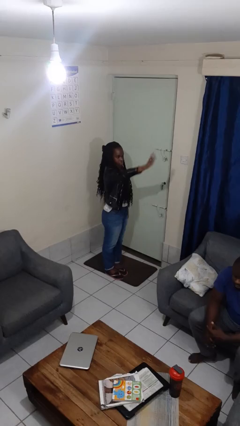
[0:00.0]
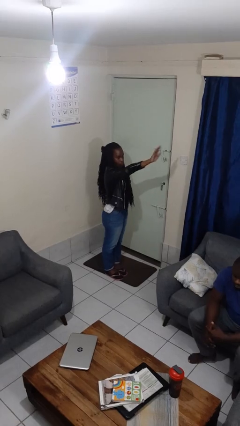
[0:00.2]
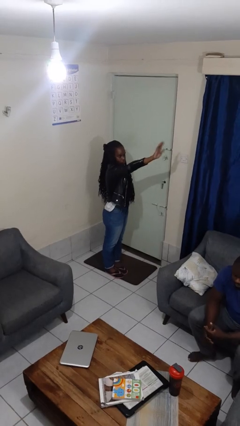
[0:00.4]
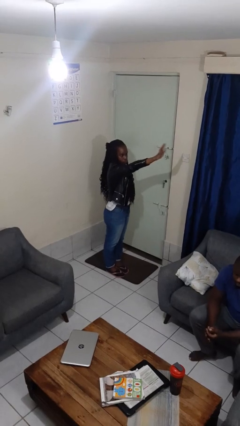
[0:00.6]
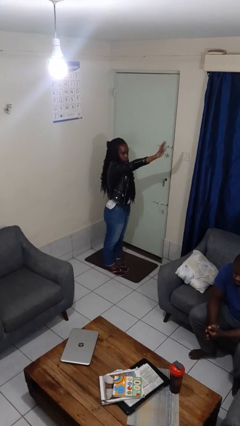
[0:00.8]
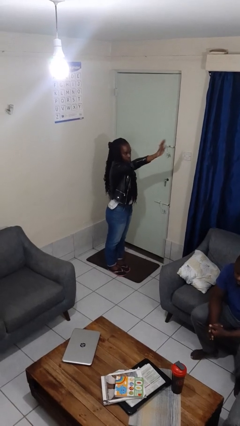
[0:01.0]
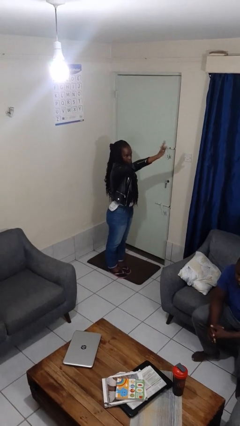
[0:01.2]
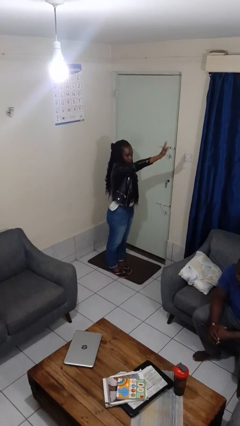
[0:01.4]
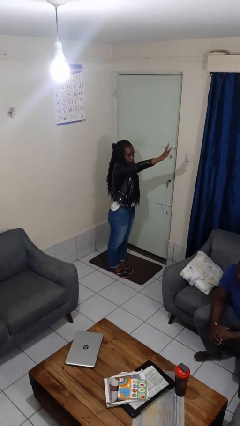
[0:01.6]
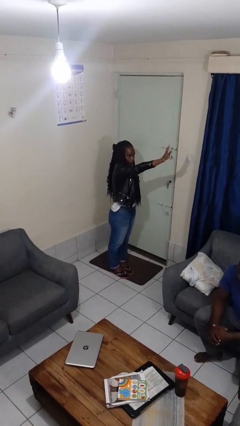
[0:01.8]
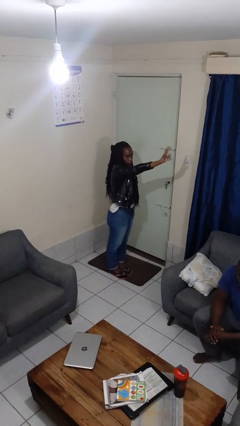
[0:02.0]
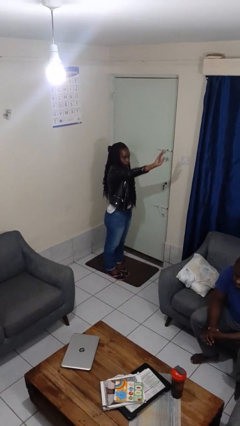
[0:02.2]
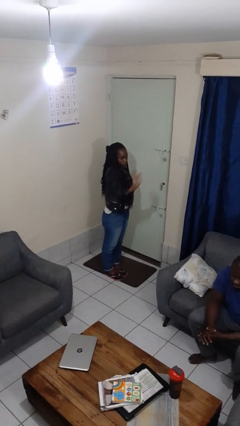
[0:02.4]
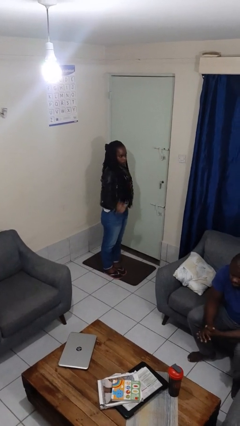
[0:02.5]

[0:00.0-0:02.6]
person waves at person

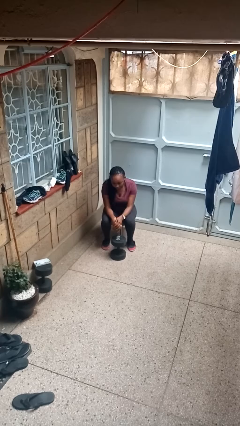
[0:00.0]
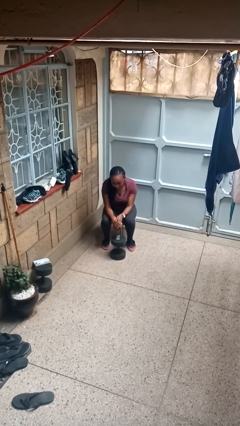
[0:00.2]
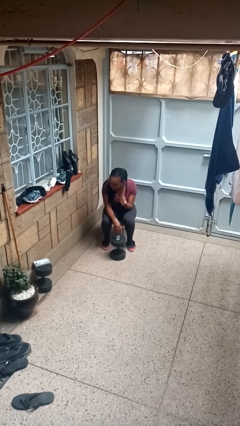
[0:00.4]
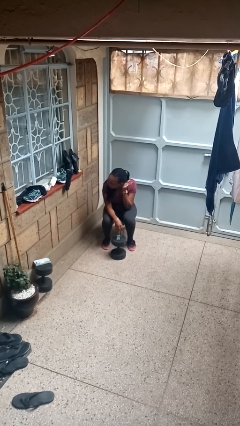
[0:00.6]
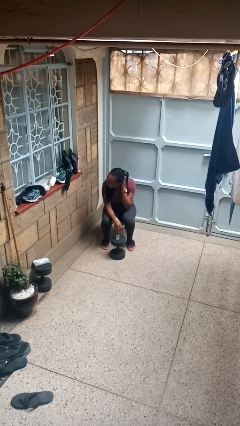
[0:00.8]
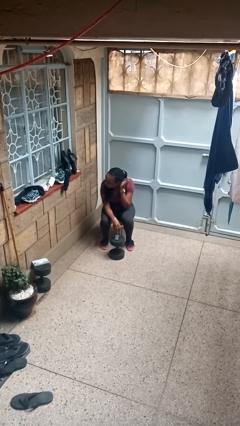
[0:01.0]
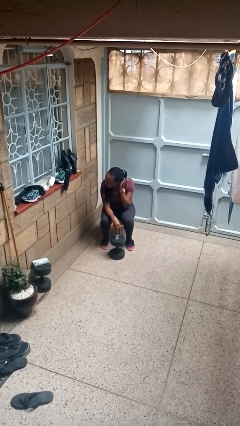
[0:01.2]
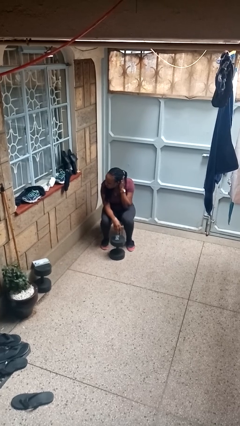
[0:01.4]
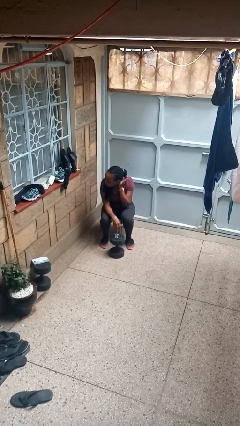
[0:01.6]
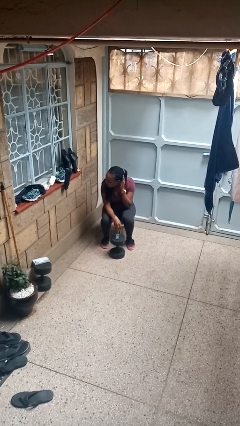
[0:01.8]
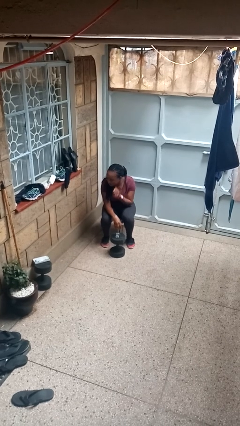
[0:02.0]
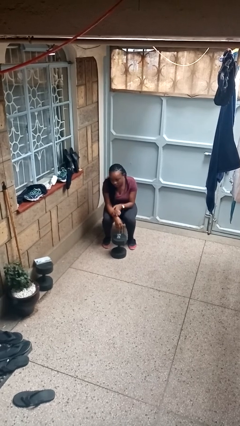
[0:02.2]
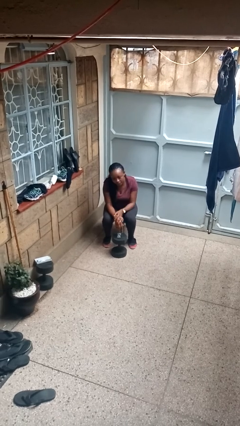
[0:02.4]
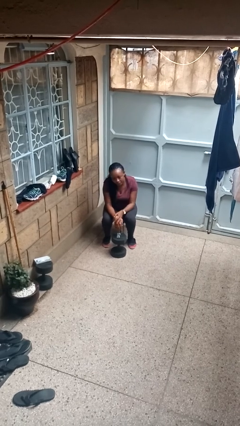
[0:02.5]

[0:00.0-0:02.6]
person pats head

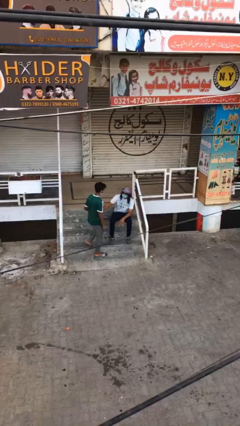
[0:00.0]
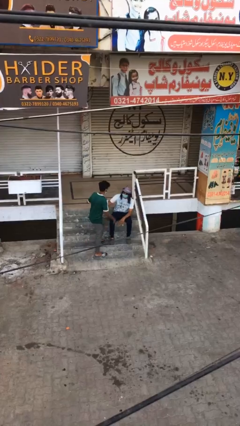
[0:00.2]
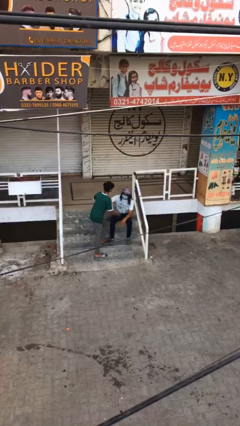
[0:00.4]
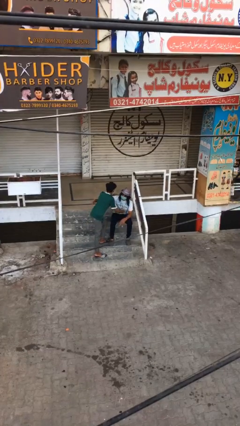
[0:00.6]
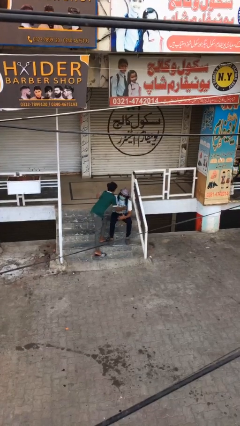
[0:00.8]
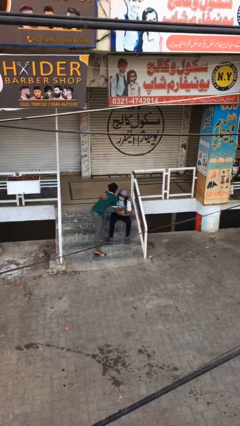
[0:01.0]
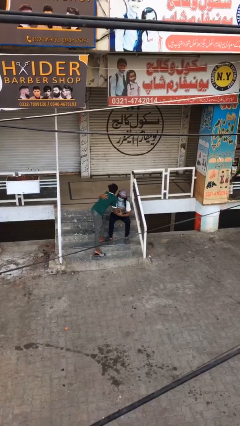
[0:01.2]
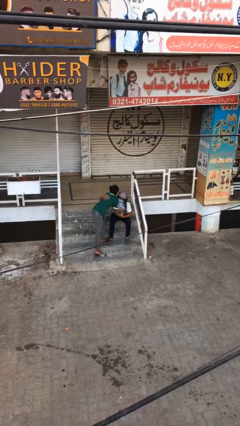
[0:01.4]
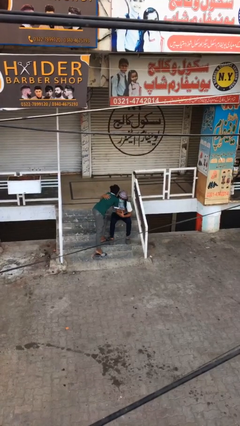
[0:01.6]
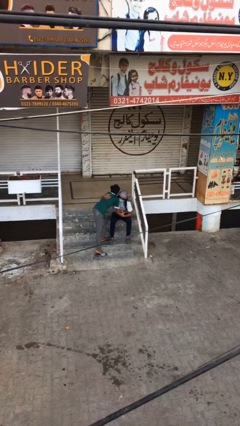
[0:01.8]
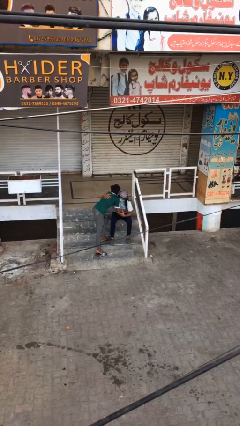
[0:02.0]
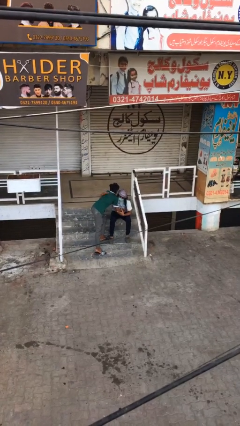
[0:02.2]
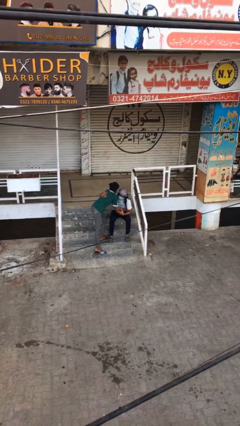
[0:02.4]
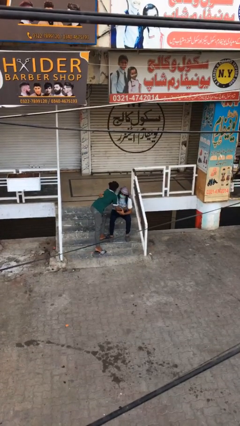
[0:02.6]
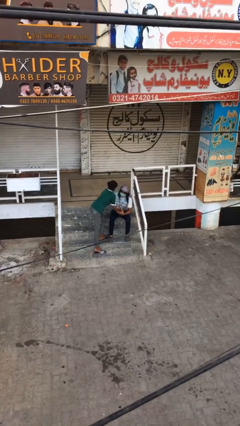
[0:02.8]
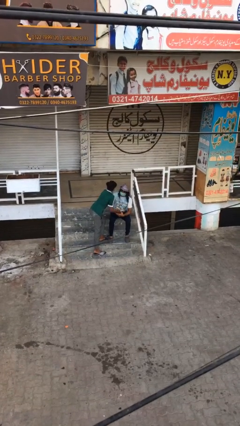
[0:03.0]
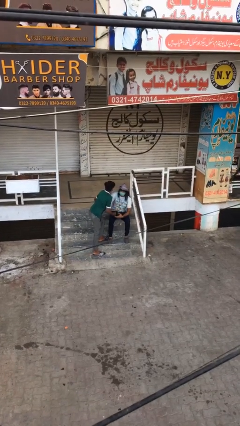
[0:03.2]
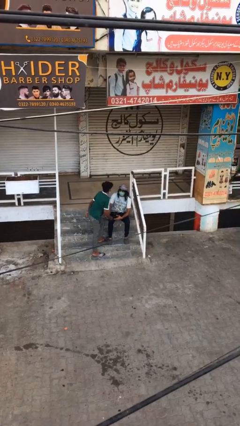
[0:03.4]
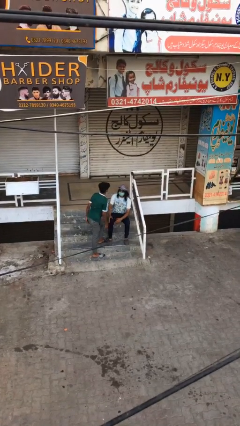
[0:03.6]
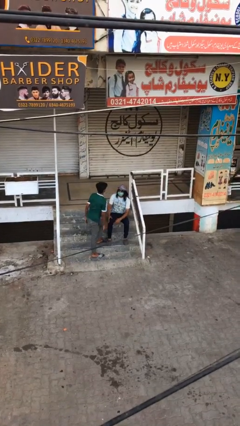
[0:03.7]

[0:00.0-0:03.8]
person embraces person

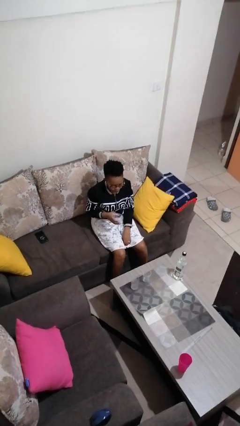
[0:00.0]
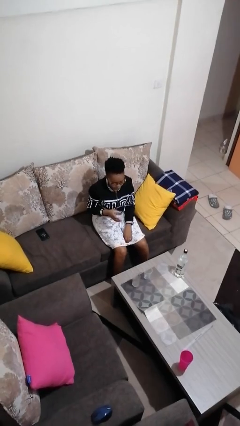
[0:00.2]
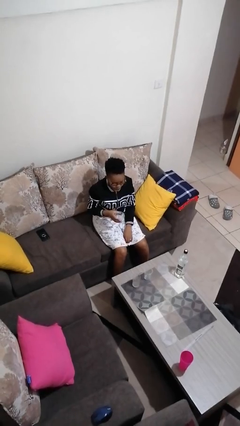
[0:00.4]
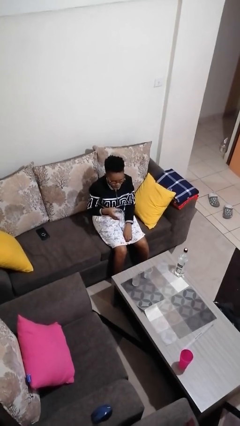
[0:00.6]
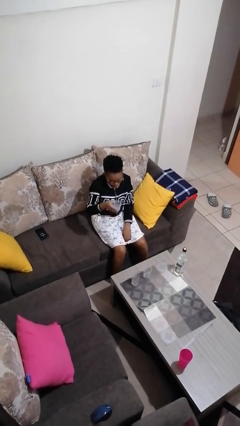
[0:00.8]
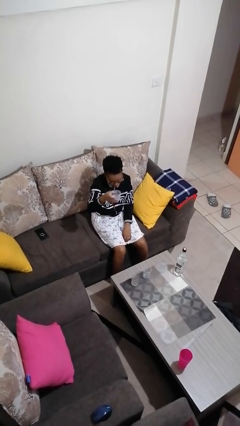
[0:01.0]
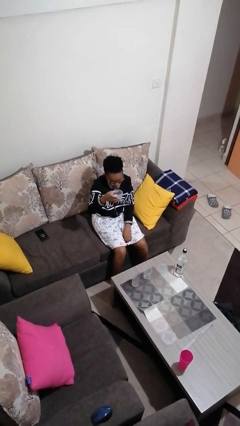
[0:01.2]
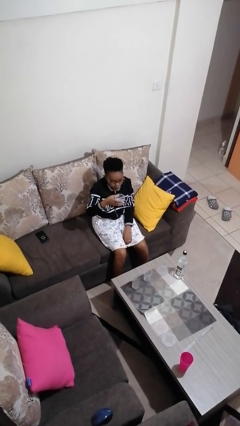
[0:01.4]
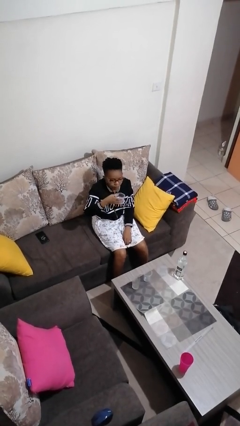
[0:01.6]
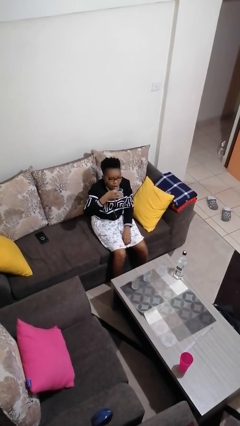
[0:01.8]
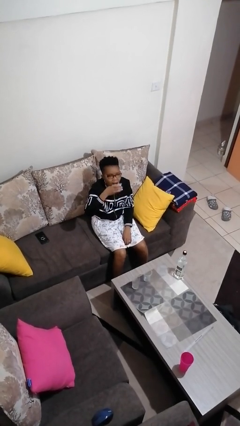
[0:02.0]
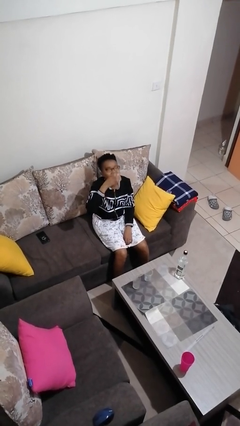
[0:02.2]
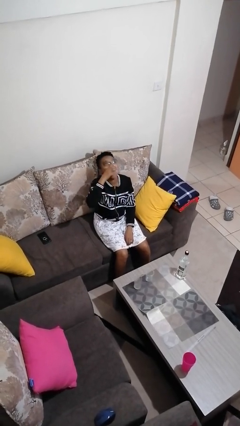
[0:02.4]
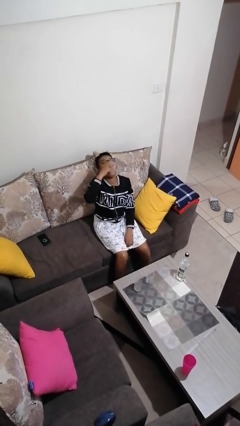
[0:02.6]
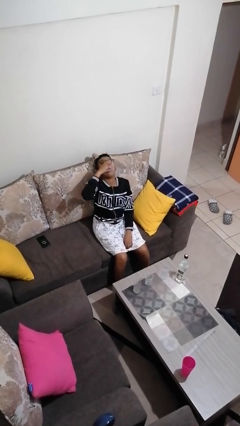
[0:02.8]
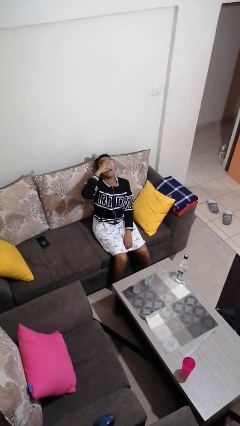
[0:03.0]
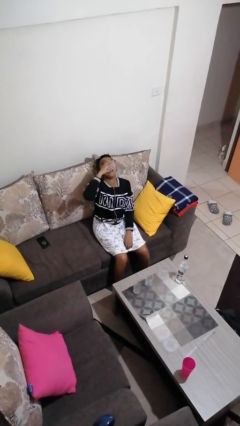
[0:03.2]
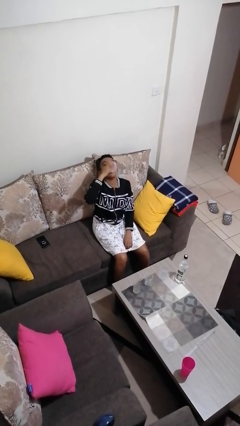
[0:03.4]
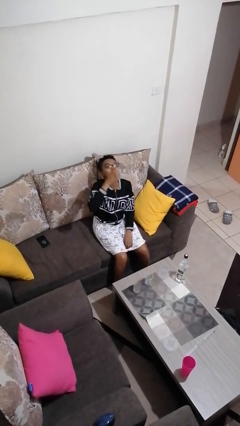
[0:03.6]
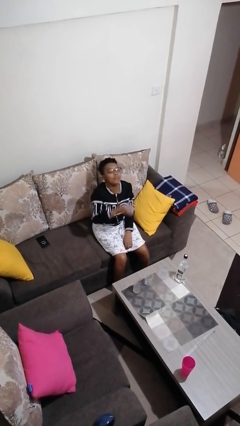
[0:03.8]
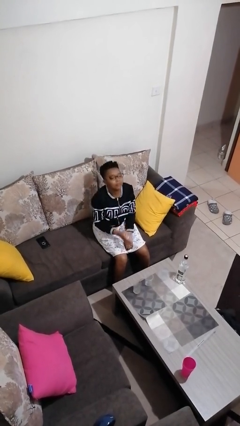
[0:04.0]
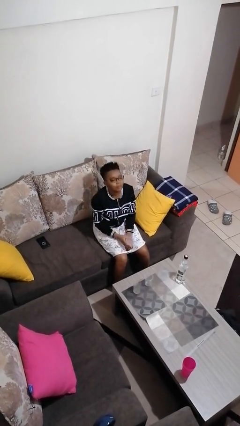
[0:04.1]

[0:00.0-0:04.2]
person drinks from shotglass

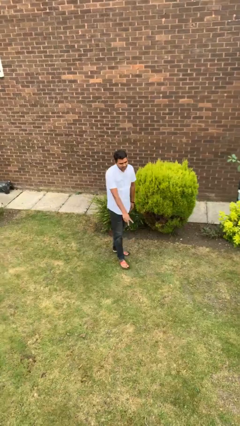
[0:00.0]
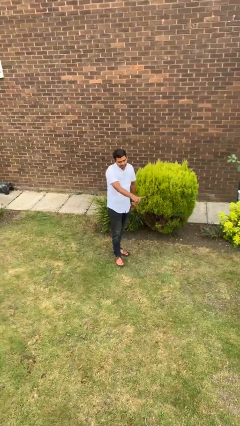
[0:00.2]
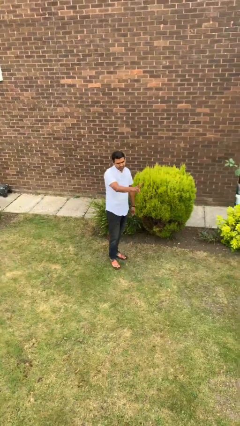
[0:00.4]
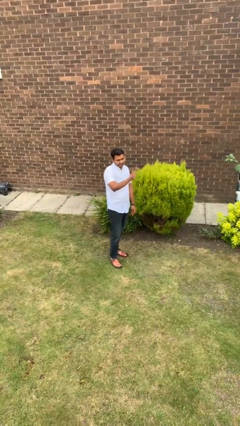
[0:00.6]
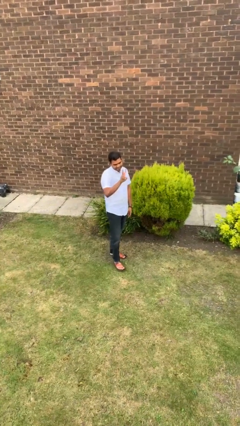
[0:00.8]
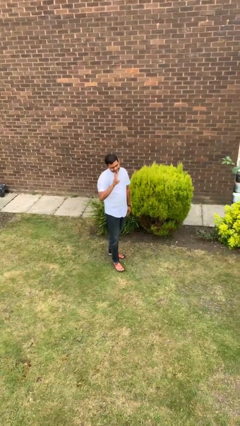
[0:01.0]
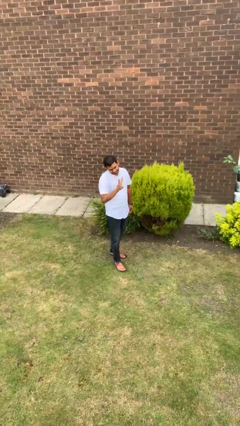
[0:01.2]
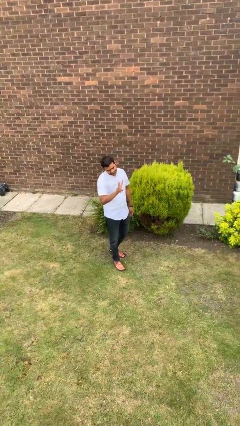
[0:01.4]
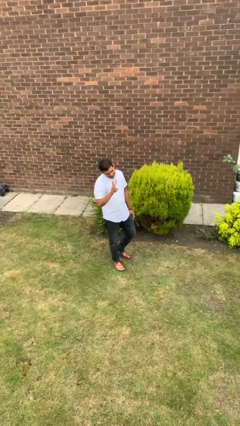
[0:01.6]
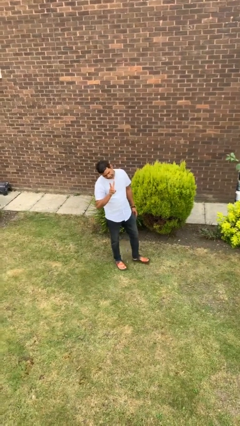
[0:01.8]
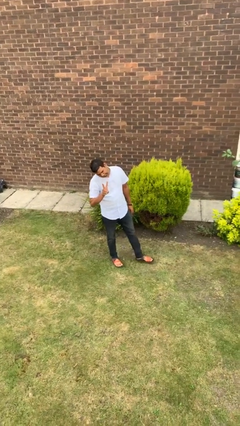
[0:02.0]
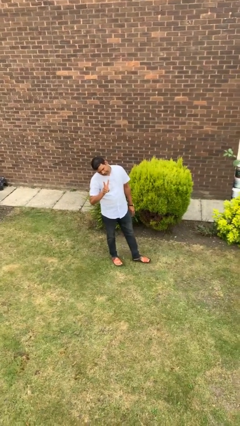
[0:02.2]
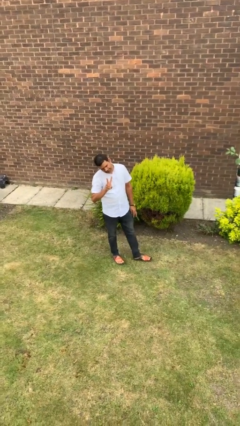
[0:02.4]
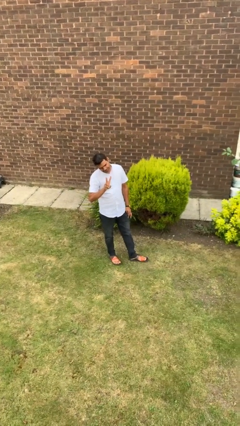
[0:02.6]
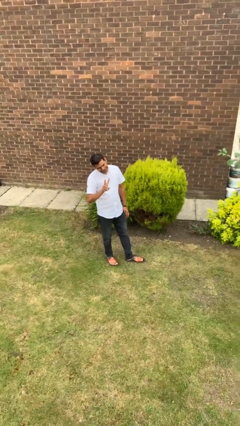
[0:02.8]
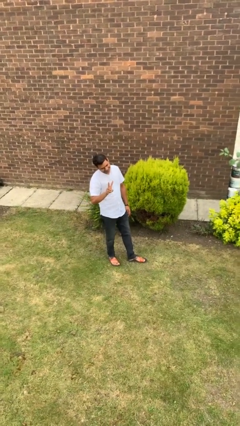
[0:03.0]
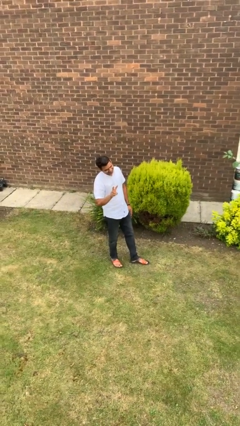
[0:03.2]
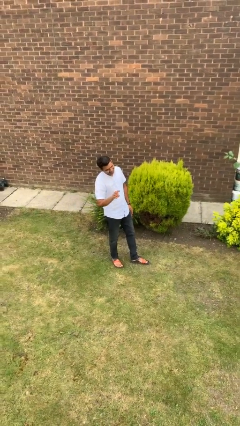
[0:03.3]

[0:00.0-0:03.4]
person gestures peace

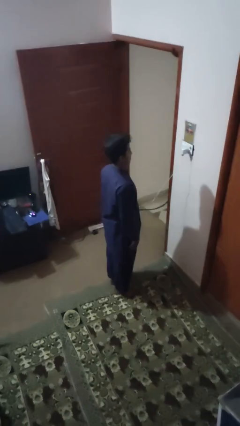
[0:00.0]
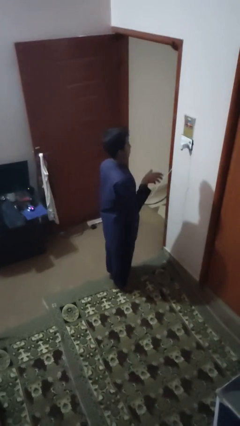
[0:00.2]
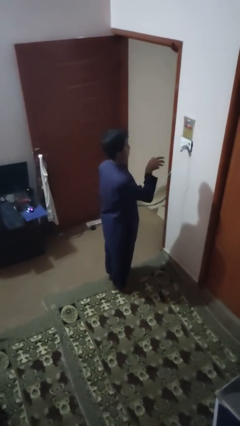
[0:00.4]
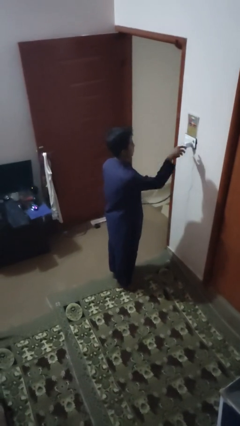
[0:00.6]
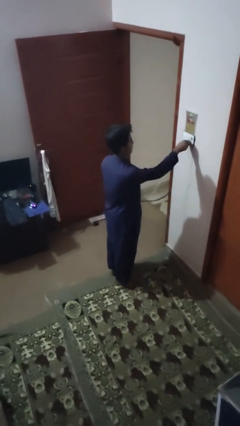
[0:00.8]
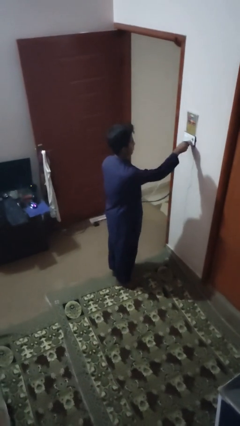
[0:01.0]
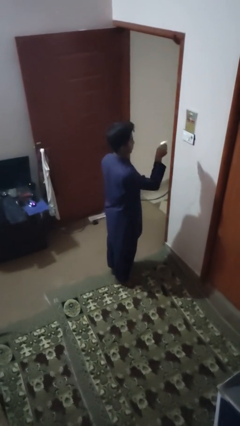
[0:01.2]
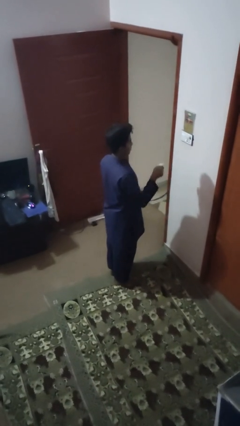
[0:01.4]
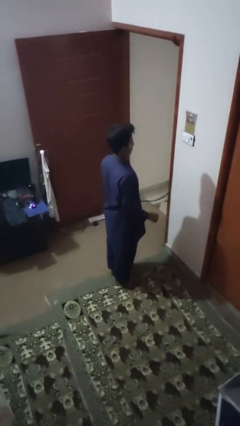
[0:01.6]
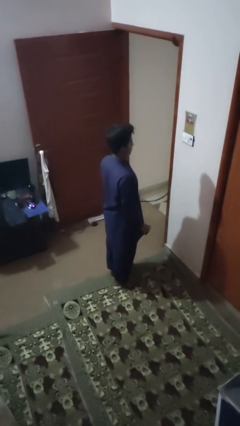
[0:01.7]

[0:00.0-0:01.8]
person unplugs from electrical socket
